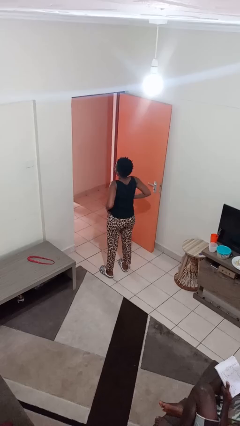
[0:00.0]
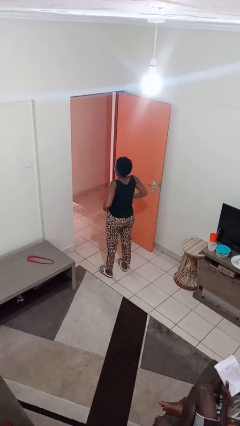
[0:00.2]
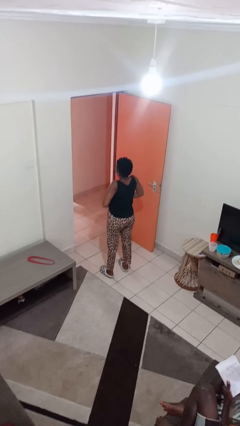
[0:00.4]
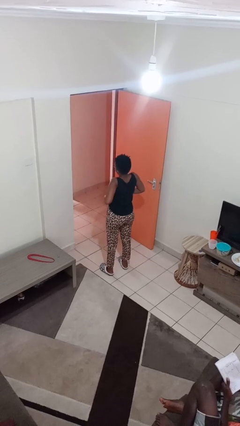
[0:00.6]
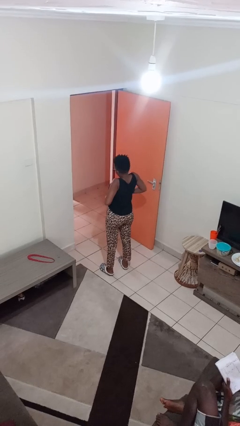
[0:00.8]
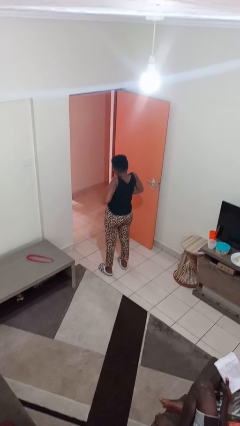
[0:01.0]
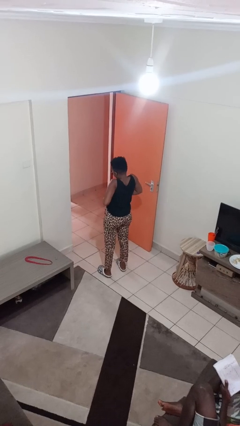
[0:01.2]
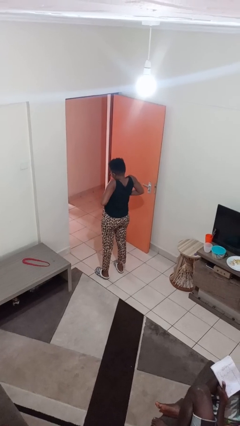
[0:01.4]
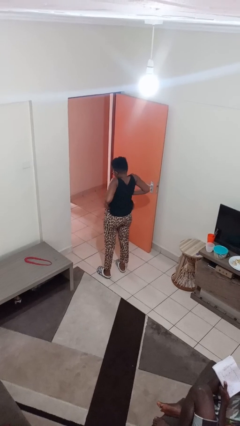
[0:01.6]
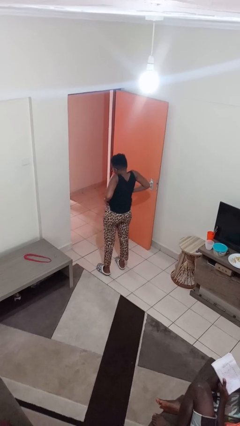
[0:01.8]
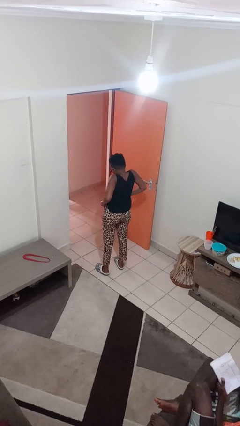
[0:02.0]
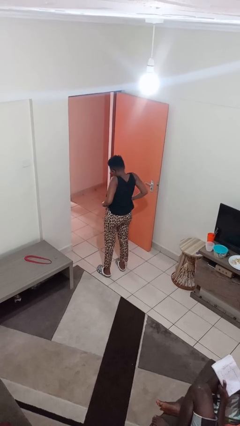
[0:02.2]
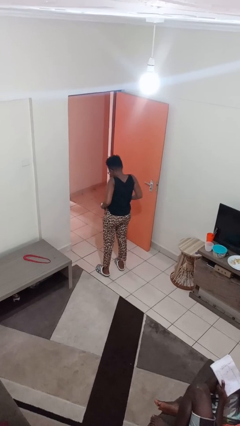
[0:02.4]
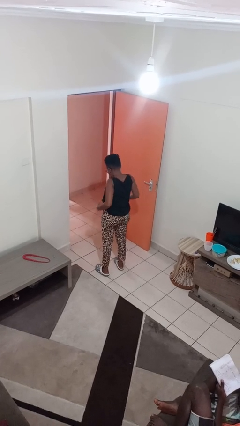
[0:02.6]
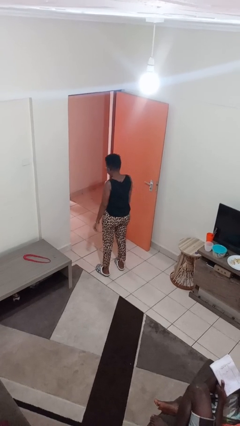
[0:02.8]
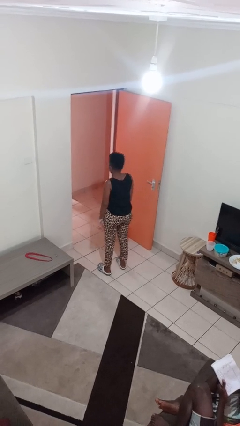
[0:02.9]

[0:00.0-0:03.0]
person hikes up pants

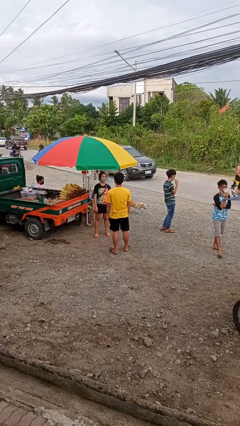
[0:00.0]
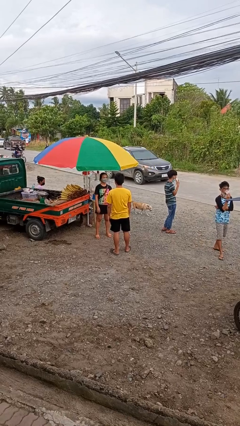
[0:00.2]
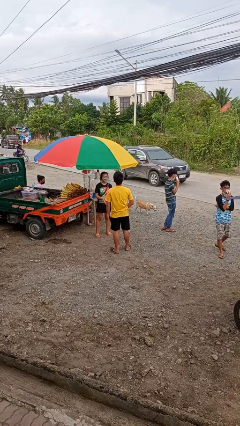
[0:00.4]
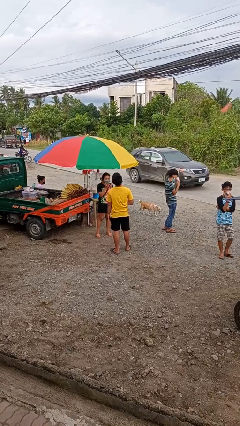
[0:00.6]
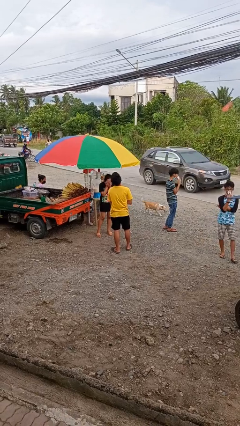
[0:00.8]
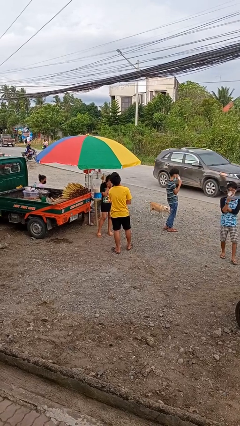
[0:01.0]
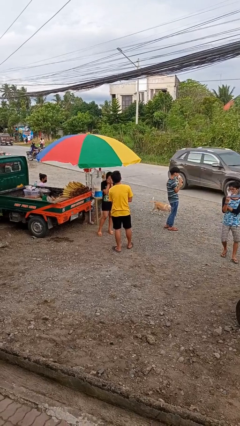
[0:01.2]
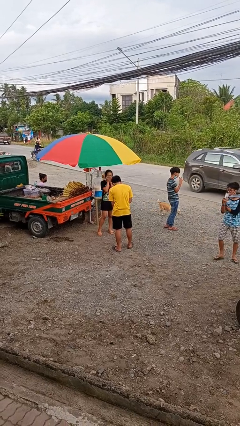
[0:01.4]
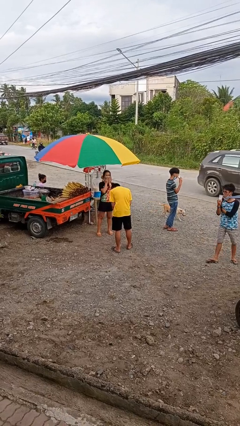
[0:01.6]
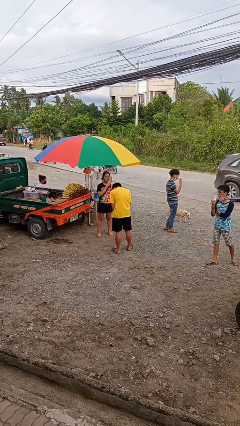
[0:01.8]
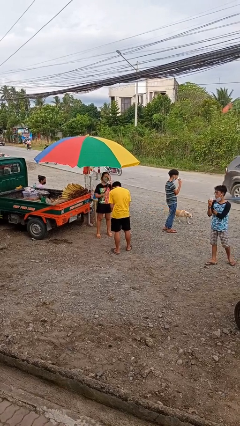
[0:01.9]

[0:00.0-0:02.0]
person laughs with person

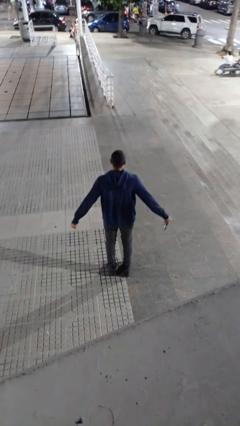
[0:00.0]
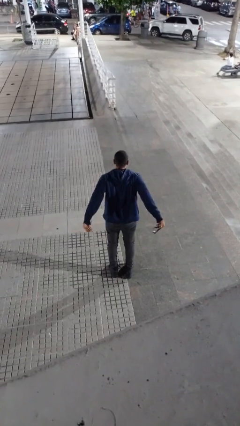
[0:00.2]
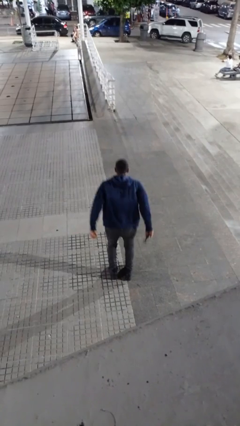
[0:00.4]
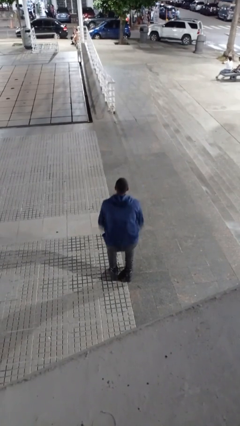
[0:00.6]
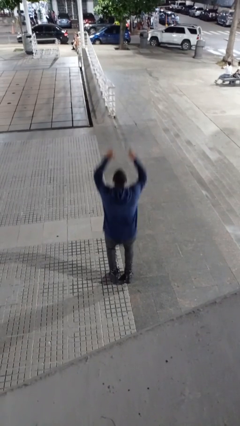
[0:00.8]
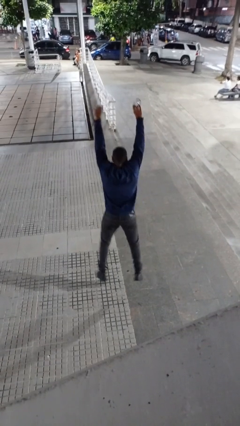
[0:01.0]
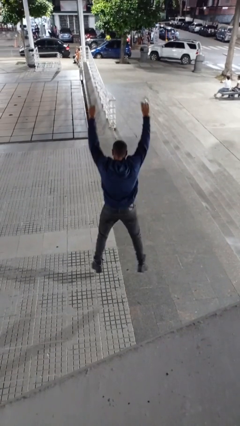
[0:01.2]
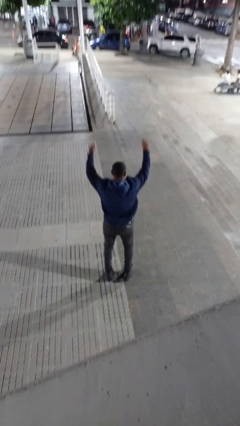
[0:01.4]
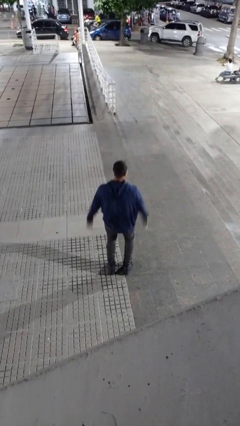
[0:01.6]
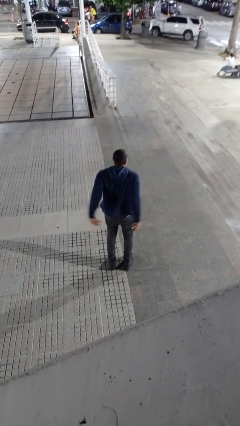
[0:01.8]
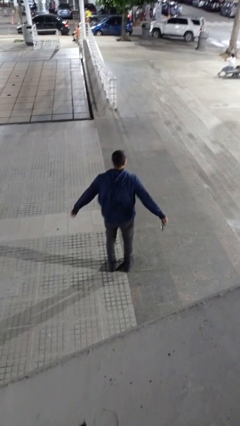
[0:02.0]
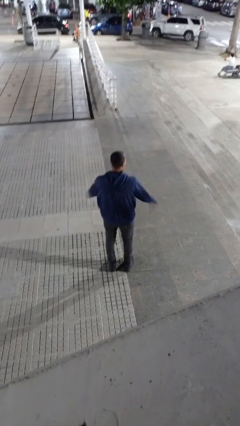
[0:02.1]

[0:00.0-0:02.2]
person jumps

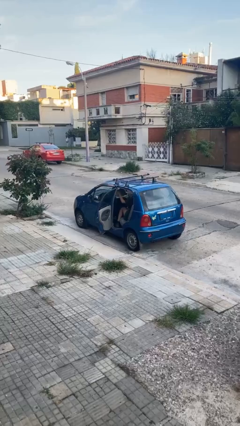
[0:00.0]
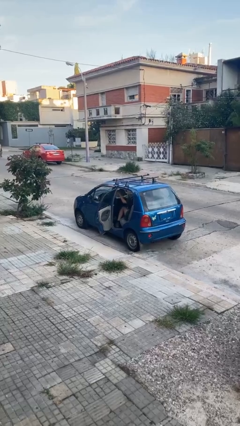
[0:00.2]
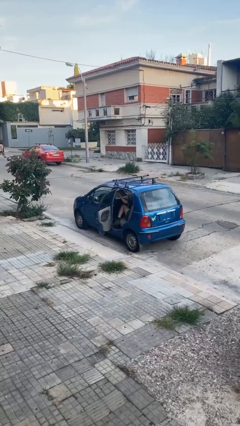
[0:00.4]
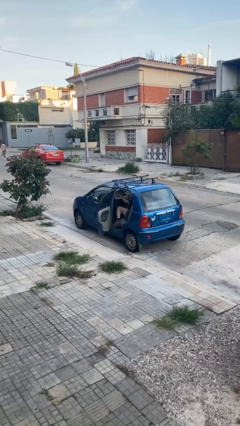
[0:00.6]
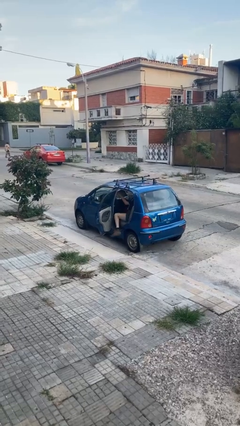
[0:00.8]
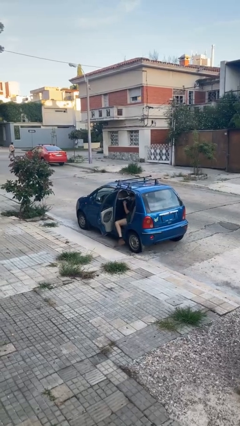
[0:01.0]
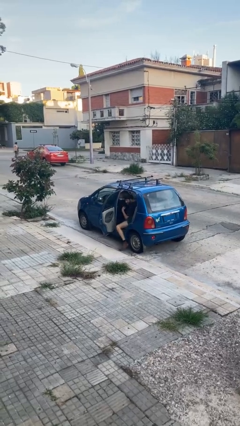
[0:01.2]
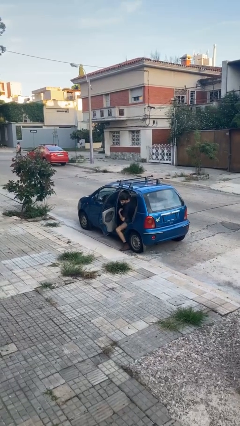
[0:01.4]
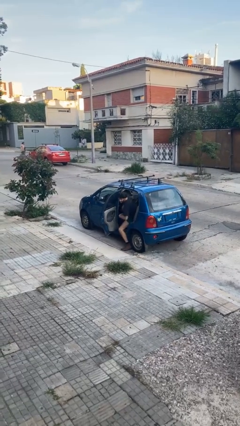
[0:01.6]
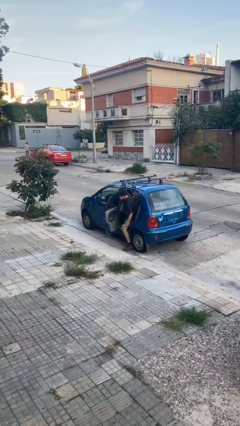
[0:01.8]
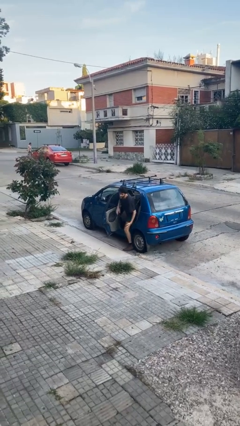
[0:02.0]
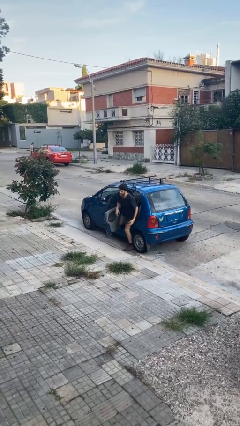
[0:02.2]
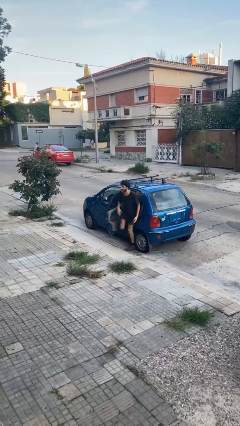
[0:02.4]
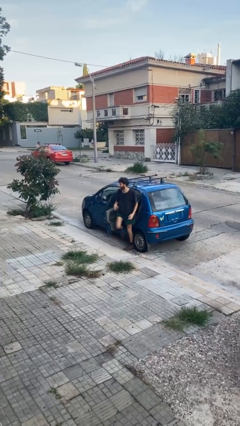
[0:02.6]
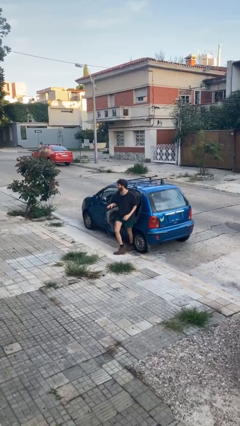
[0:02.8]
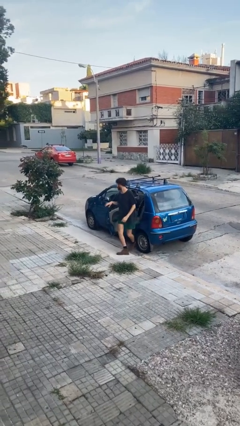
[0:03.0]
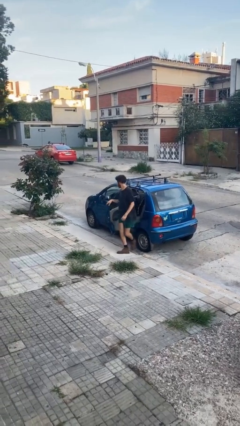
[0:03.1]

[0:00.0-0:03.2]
person exits car

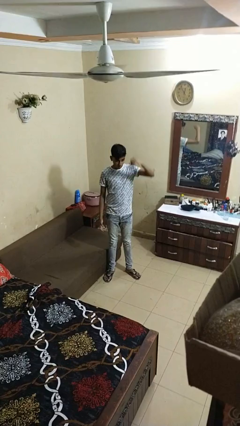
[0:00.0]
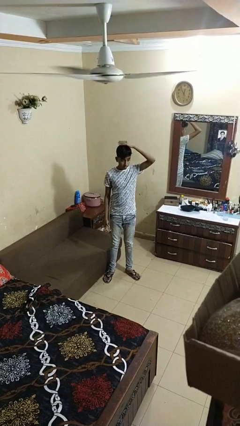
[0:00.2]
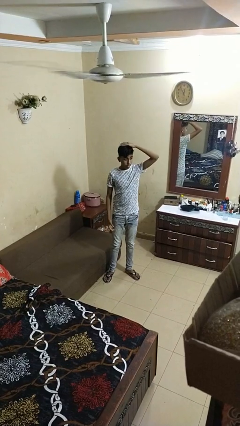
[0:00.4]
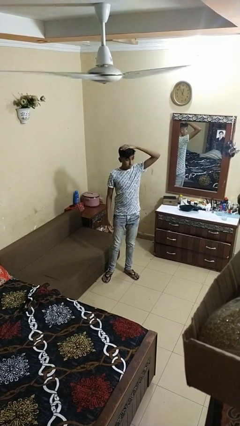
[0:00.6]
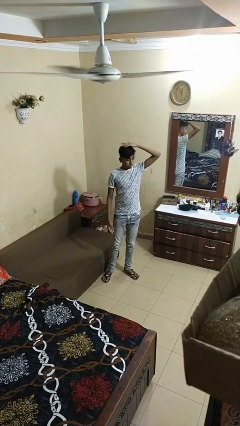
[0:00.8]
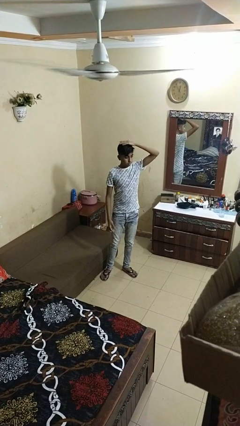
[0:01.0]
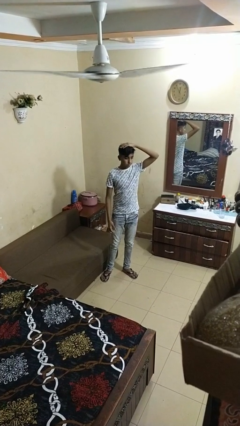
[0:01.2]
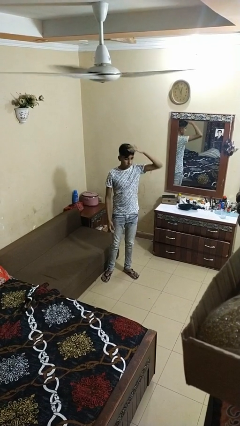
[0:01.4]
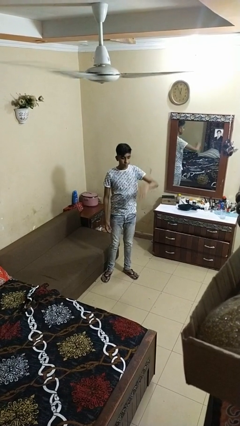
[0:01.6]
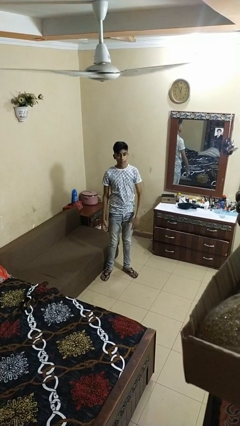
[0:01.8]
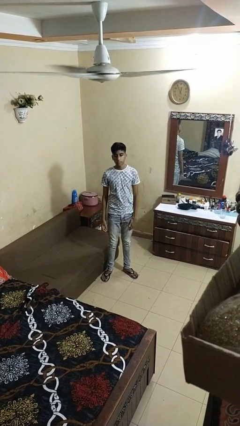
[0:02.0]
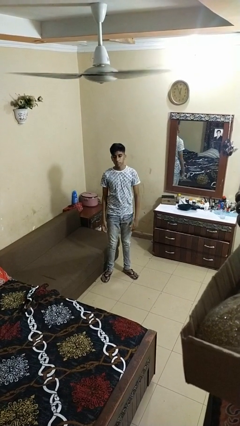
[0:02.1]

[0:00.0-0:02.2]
person pats head

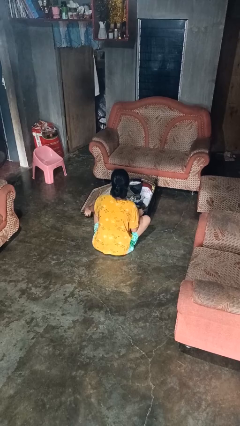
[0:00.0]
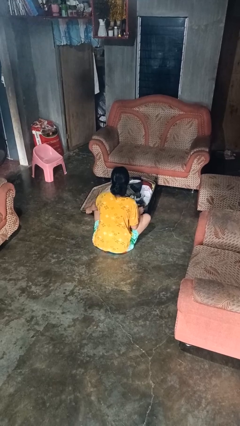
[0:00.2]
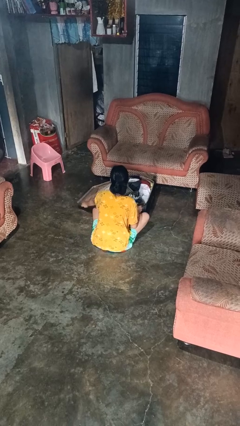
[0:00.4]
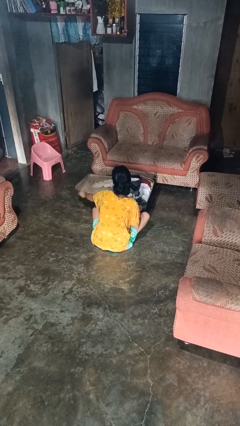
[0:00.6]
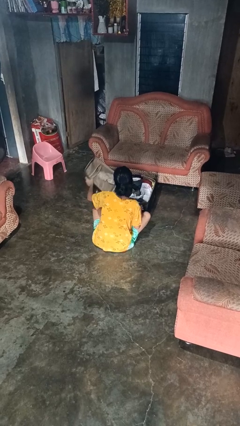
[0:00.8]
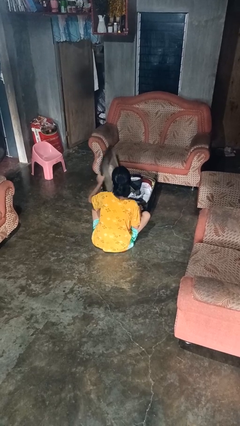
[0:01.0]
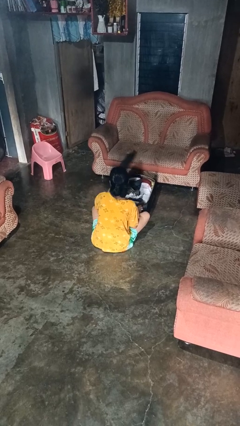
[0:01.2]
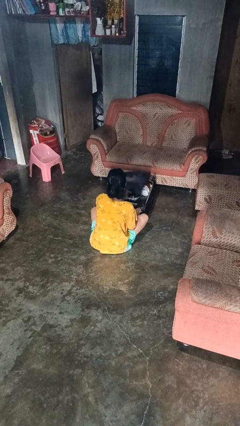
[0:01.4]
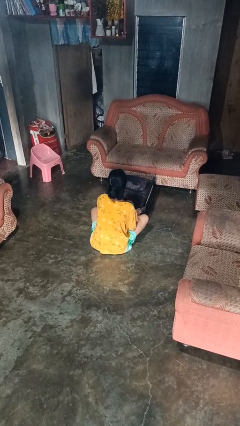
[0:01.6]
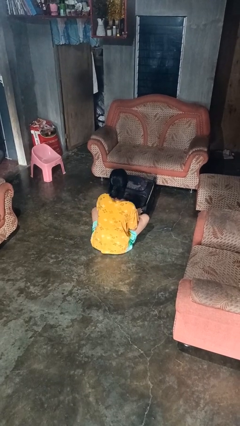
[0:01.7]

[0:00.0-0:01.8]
person closes suitcase

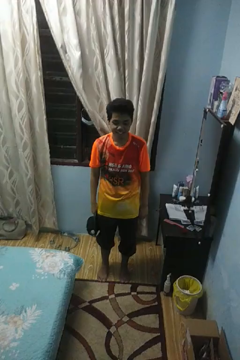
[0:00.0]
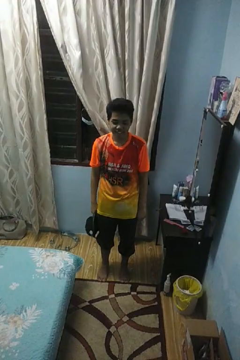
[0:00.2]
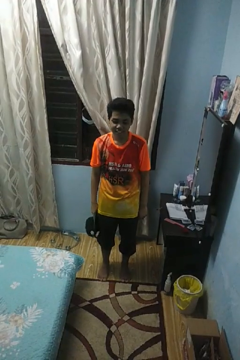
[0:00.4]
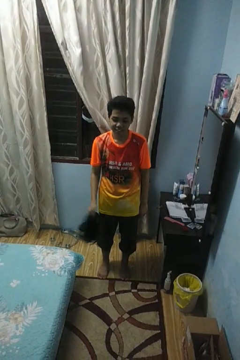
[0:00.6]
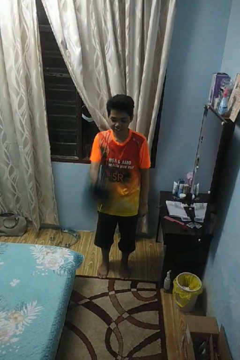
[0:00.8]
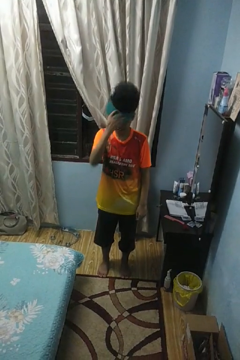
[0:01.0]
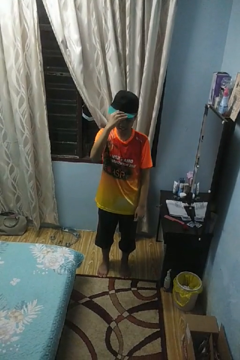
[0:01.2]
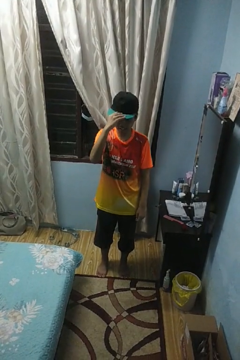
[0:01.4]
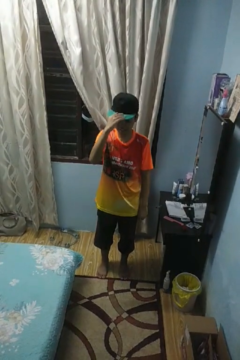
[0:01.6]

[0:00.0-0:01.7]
person puts on hat

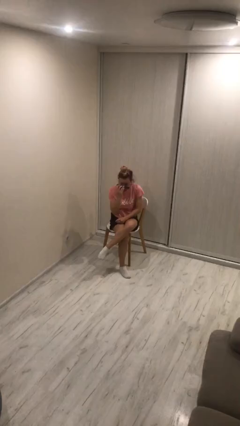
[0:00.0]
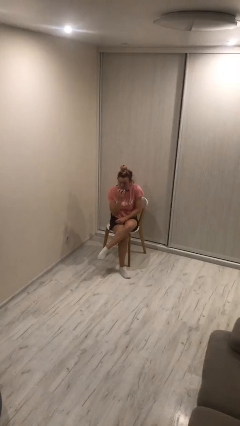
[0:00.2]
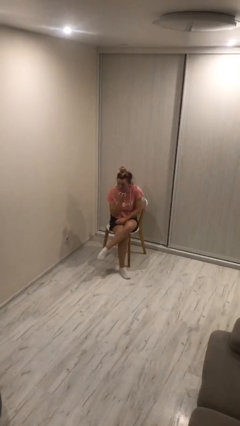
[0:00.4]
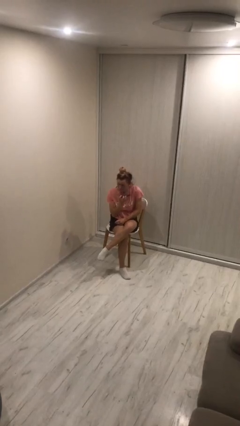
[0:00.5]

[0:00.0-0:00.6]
person takes off sunglasses

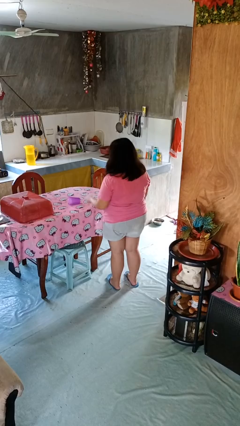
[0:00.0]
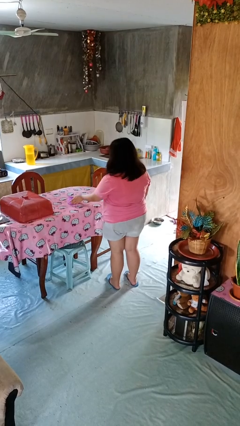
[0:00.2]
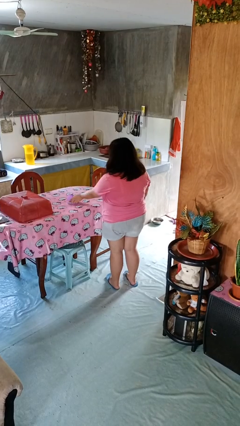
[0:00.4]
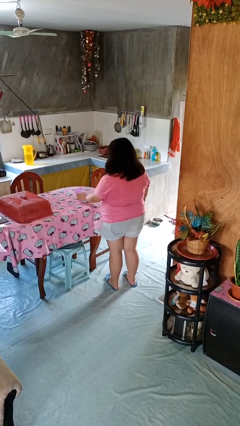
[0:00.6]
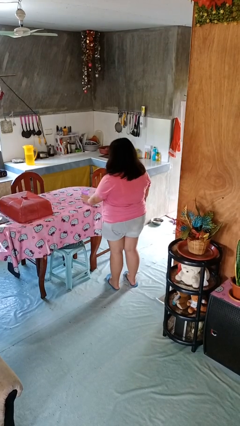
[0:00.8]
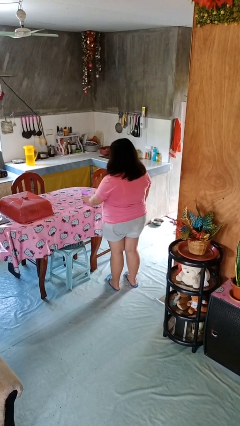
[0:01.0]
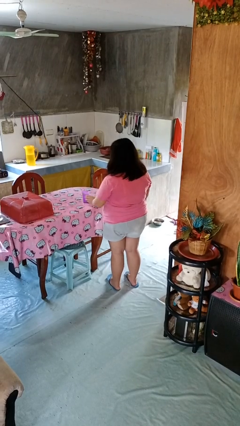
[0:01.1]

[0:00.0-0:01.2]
person sets upright glass
